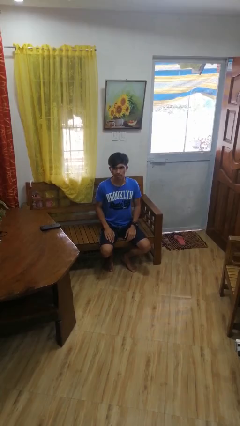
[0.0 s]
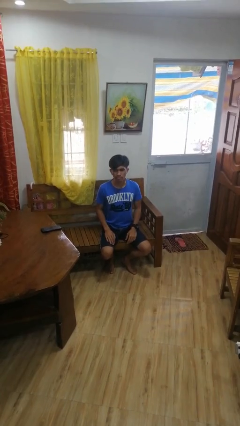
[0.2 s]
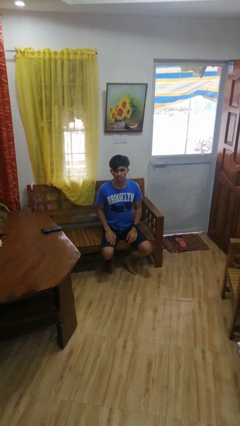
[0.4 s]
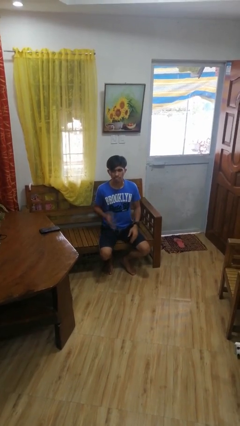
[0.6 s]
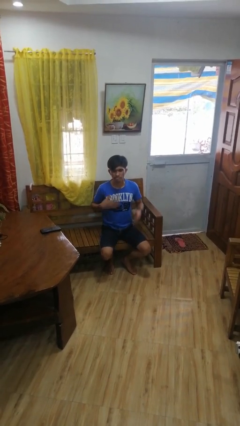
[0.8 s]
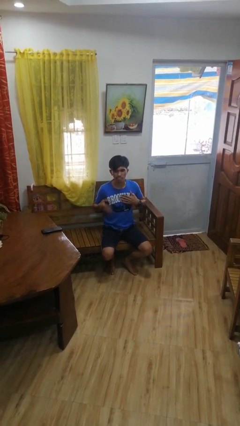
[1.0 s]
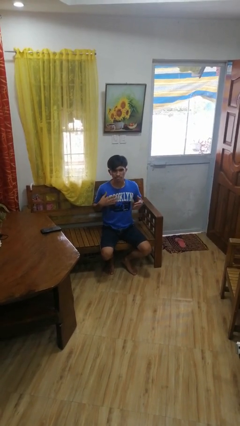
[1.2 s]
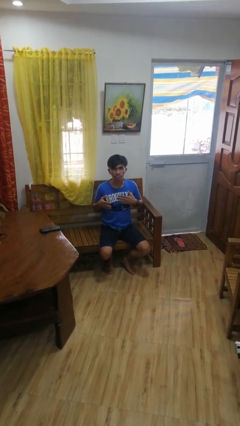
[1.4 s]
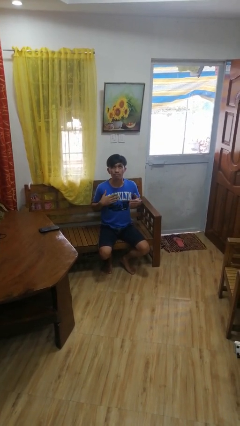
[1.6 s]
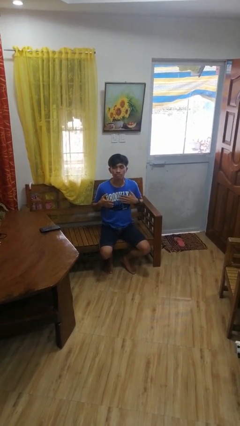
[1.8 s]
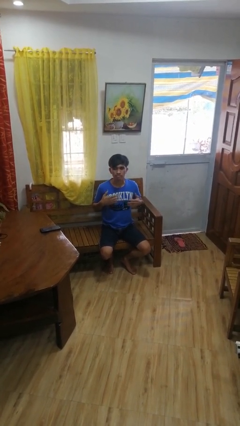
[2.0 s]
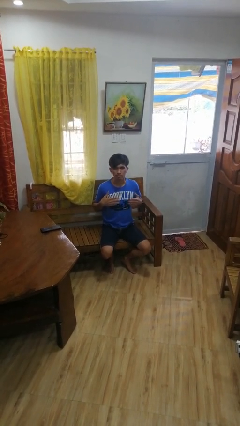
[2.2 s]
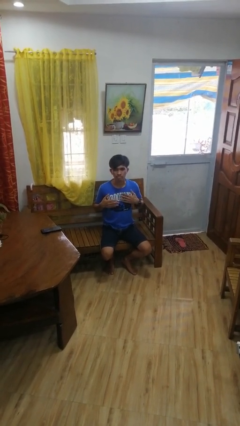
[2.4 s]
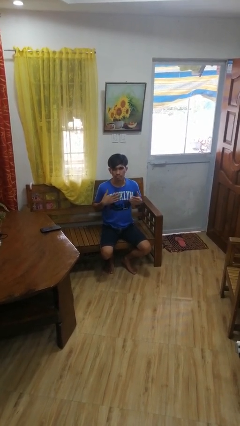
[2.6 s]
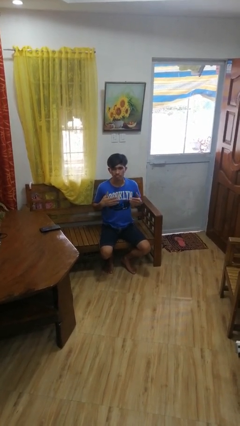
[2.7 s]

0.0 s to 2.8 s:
person drums on chest

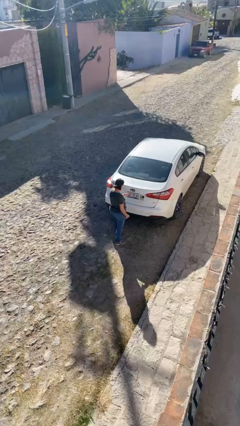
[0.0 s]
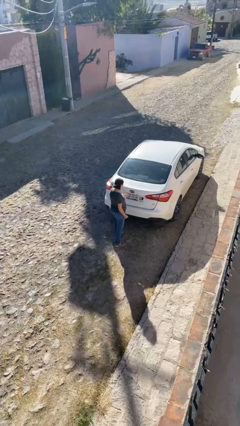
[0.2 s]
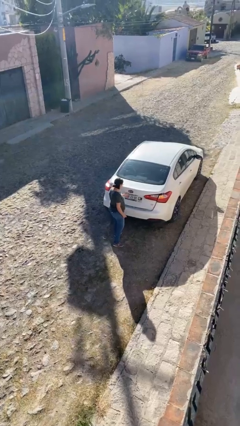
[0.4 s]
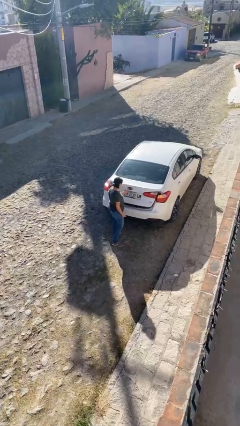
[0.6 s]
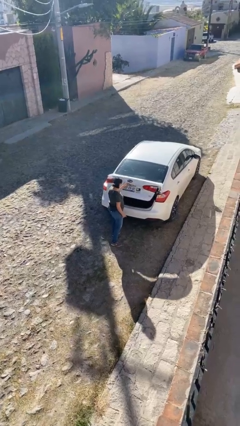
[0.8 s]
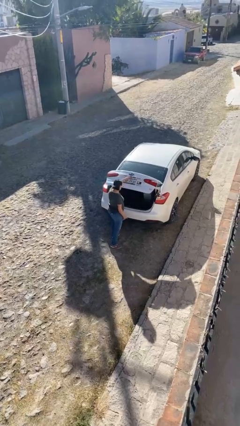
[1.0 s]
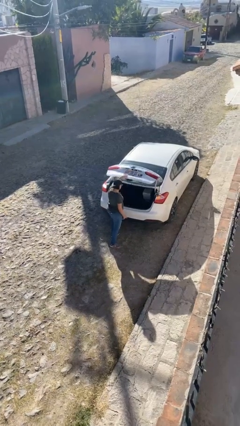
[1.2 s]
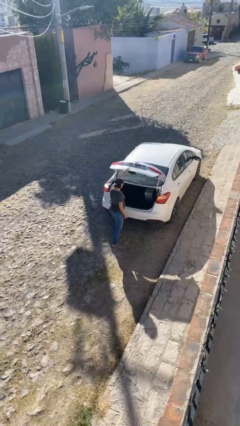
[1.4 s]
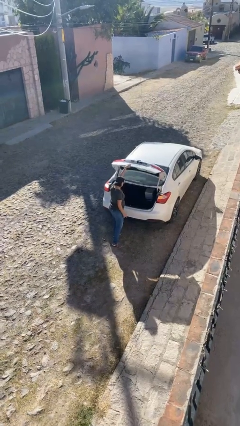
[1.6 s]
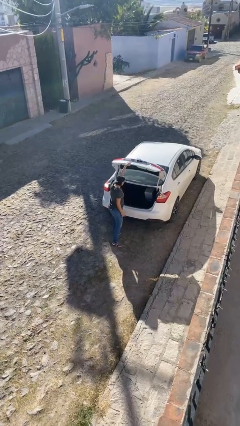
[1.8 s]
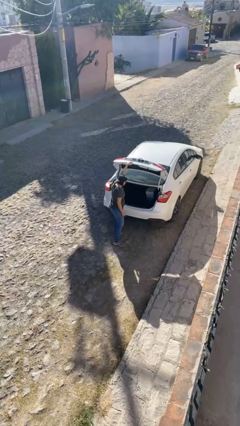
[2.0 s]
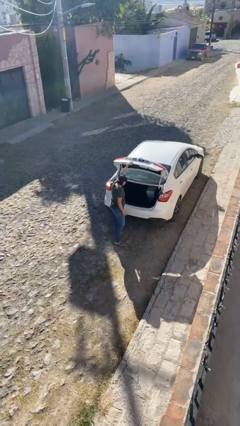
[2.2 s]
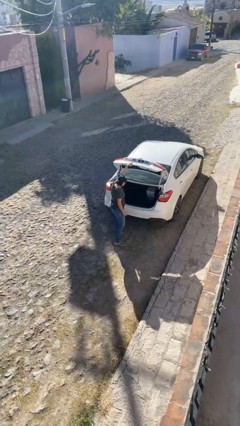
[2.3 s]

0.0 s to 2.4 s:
person opens car trunk

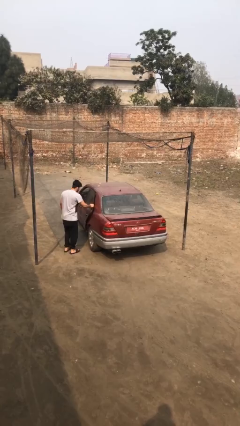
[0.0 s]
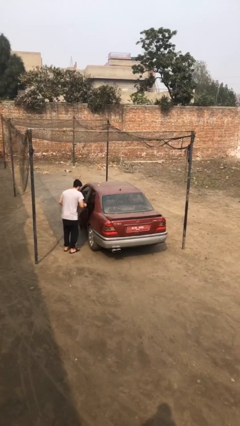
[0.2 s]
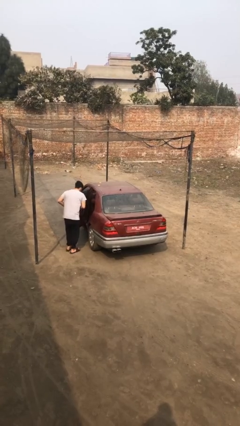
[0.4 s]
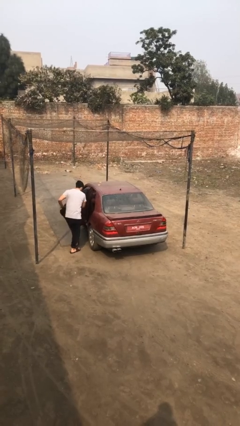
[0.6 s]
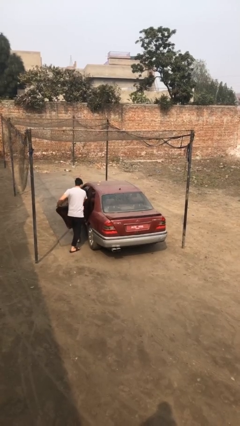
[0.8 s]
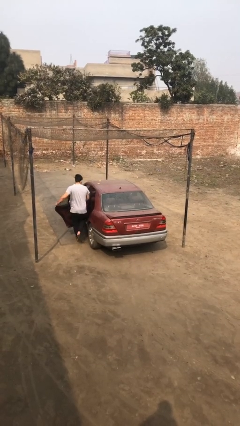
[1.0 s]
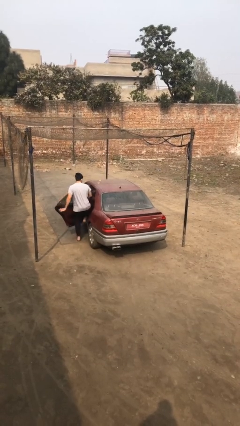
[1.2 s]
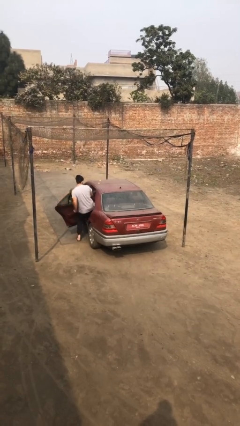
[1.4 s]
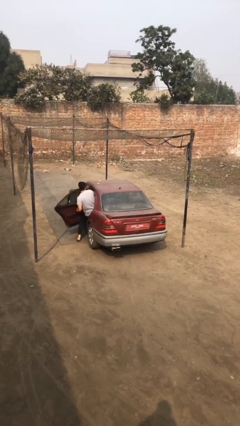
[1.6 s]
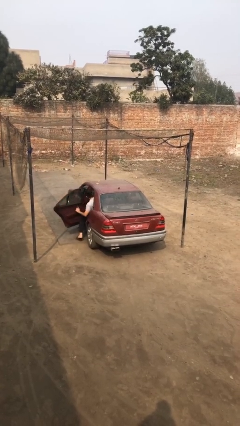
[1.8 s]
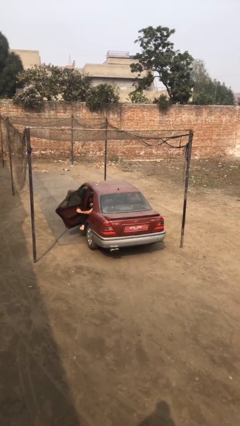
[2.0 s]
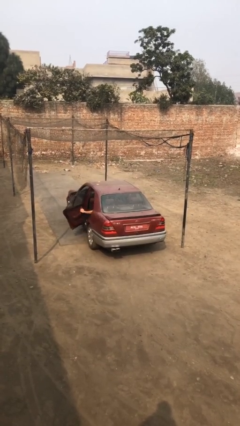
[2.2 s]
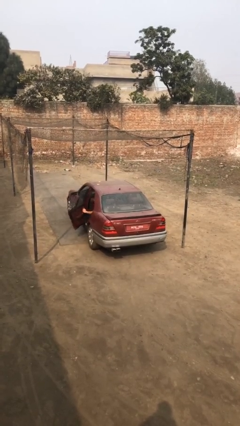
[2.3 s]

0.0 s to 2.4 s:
car picks up person

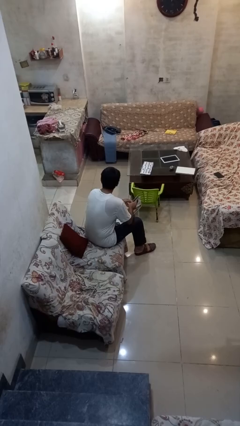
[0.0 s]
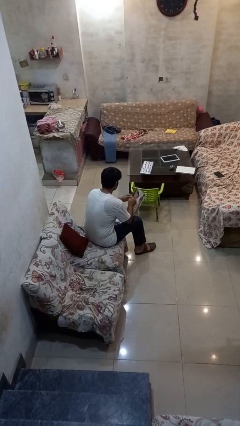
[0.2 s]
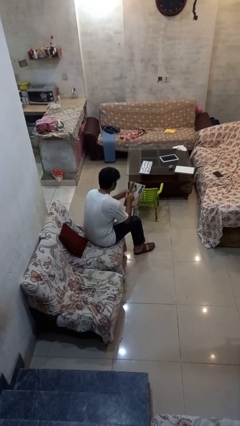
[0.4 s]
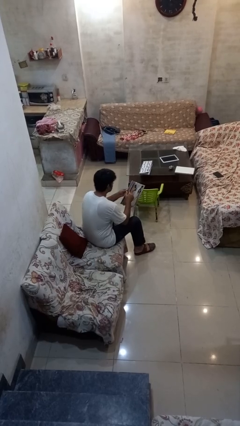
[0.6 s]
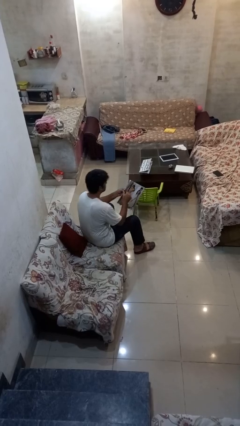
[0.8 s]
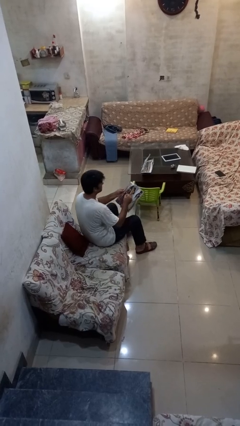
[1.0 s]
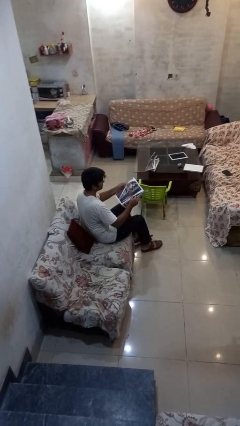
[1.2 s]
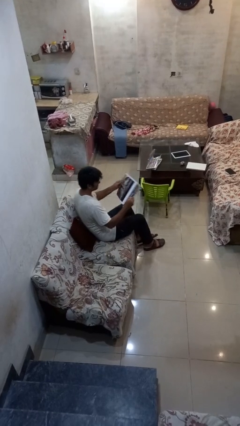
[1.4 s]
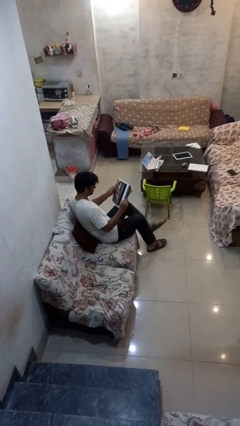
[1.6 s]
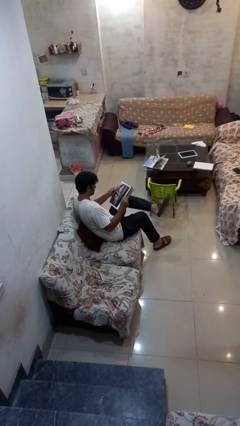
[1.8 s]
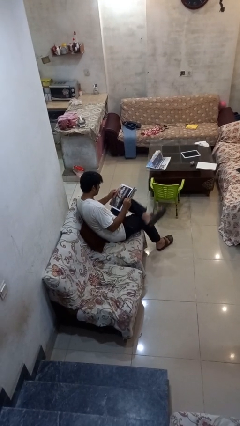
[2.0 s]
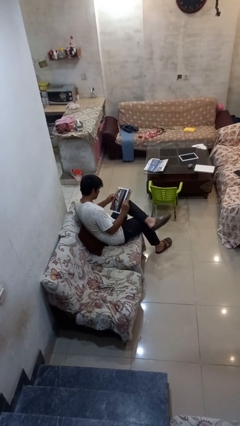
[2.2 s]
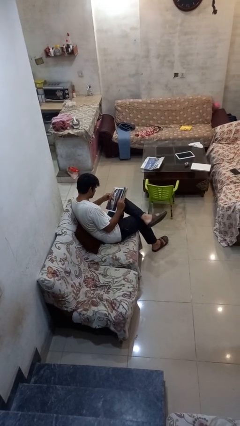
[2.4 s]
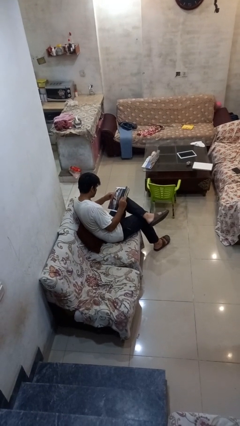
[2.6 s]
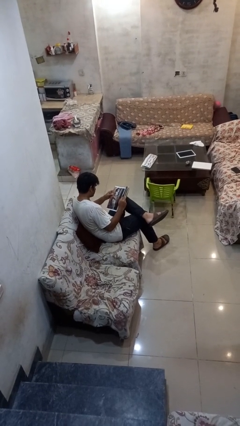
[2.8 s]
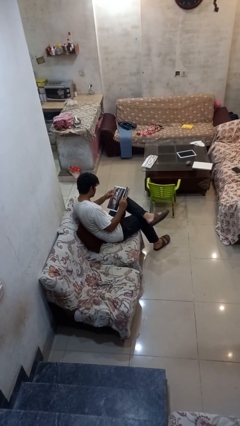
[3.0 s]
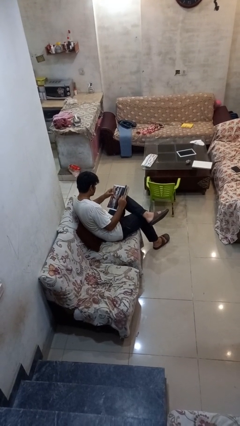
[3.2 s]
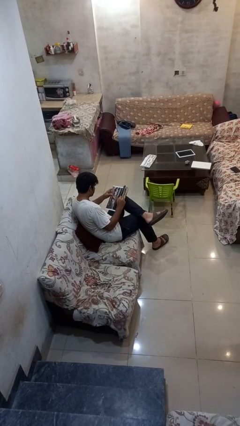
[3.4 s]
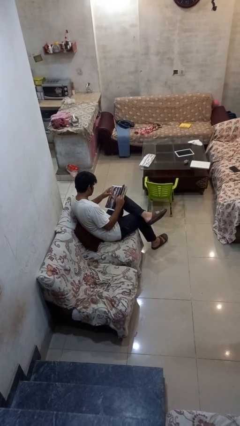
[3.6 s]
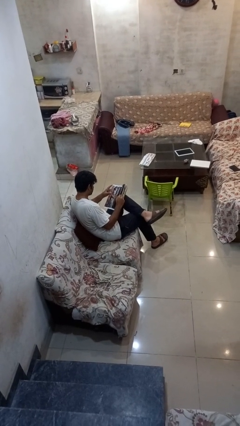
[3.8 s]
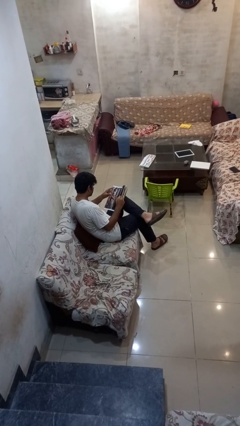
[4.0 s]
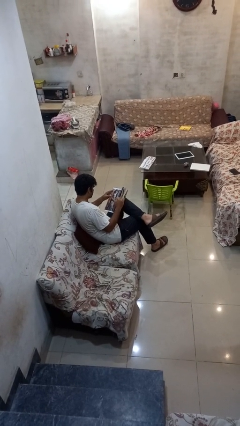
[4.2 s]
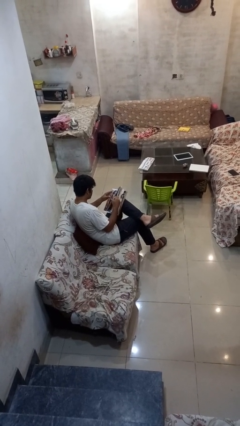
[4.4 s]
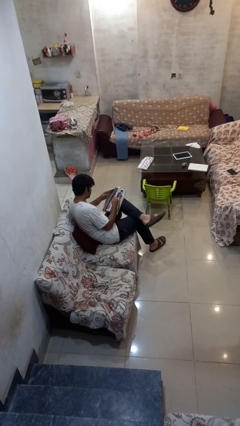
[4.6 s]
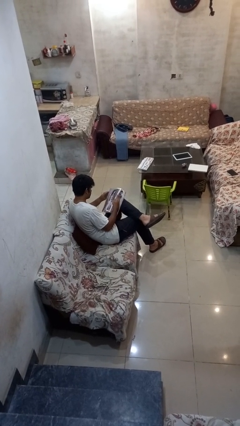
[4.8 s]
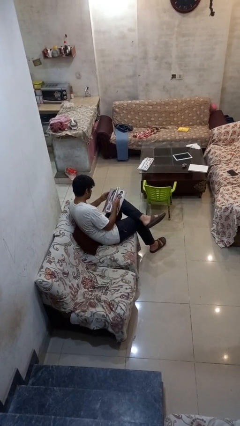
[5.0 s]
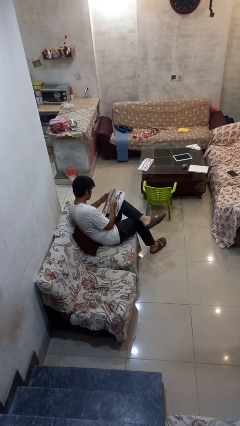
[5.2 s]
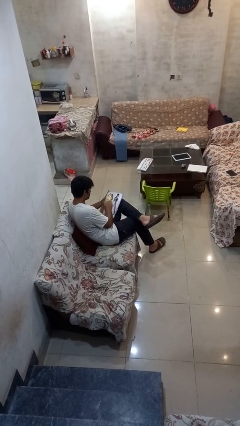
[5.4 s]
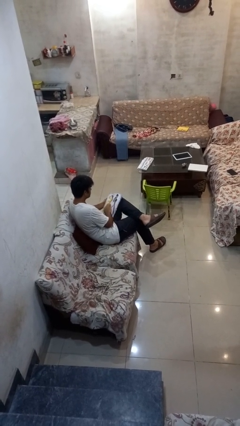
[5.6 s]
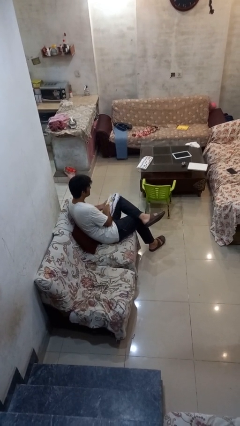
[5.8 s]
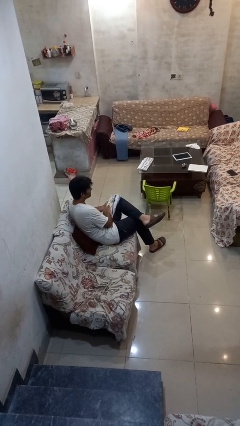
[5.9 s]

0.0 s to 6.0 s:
person reads magazine

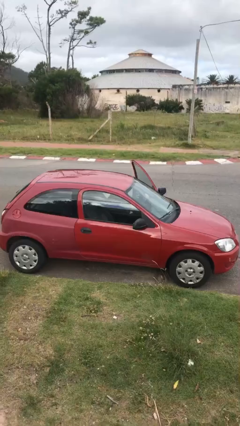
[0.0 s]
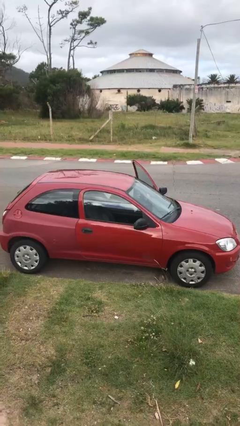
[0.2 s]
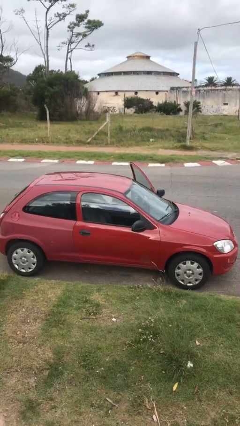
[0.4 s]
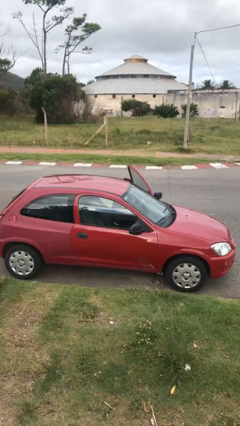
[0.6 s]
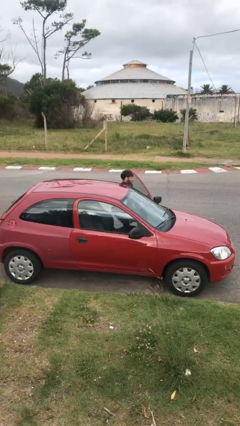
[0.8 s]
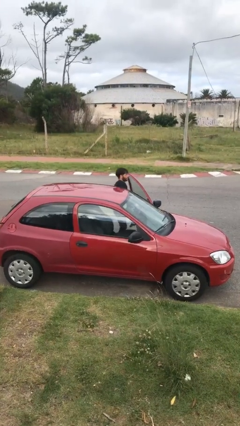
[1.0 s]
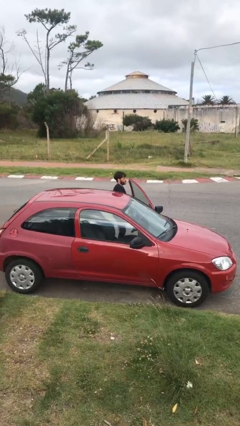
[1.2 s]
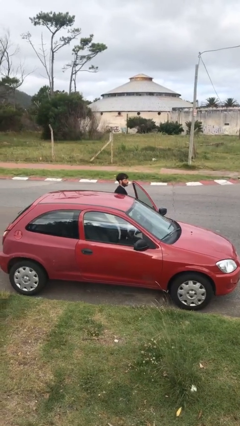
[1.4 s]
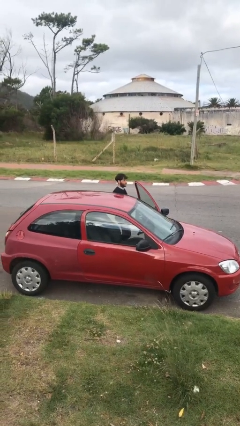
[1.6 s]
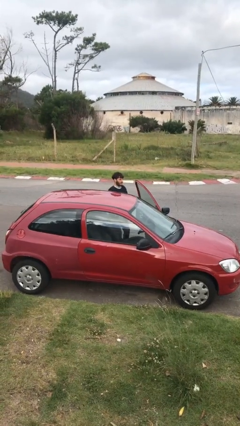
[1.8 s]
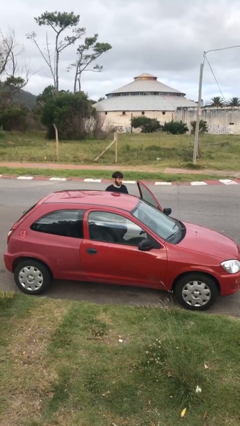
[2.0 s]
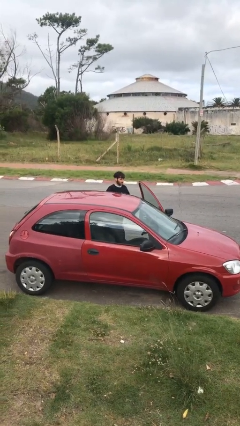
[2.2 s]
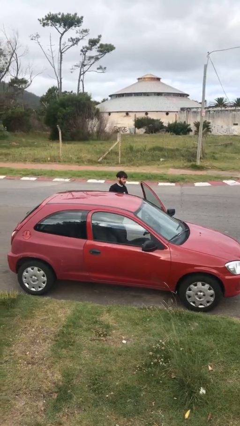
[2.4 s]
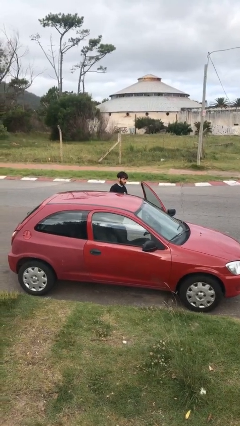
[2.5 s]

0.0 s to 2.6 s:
person exits car

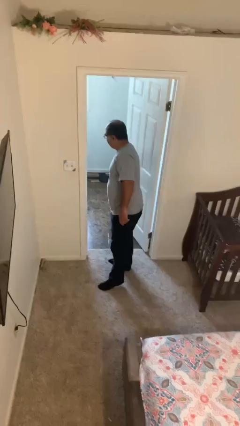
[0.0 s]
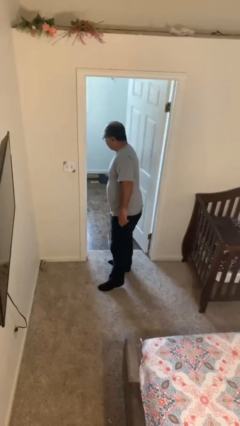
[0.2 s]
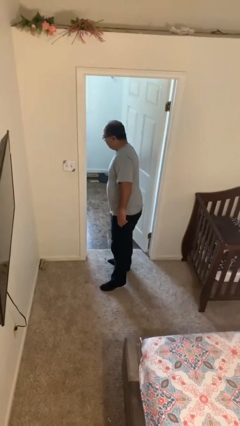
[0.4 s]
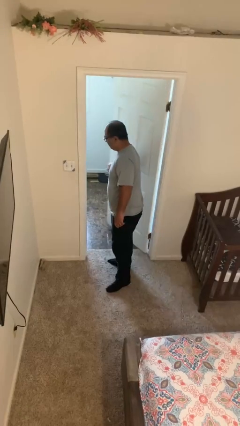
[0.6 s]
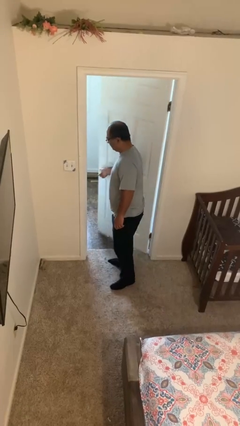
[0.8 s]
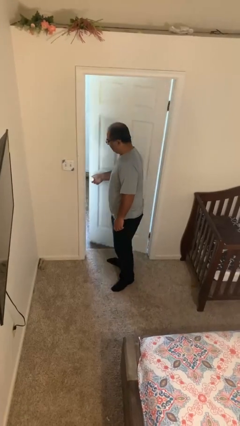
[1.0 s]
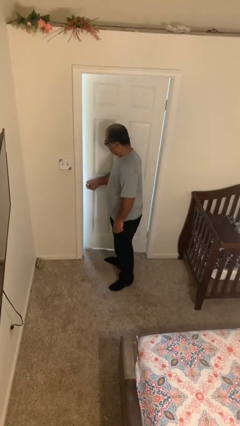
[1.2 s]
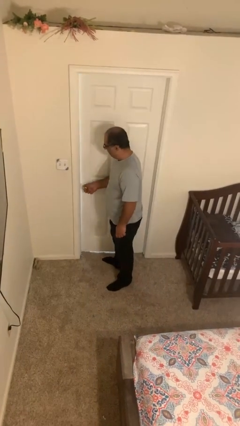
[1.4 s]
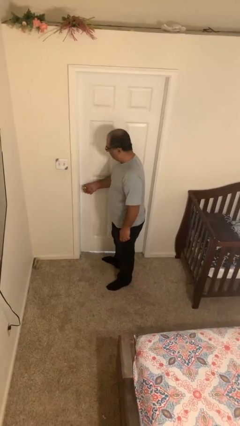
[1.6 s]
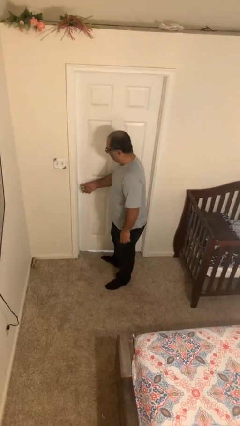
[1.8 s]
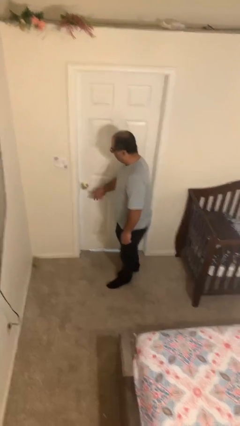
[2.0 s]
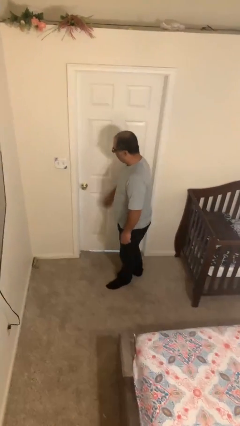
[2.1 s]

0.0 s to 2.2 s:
person closes facility door
